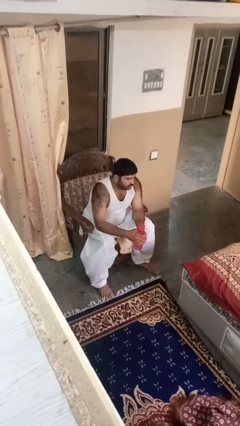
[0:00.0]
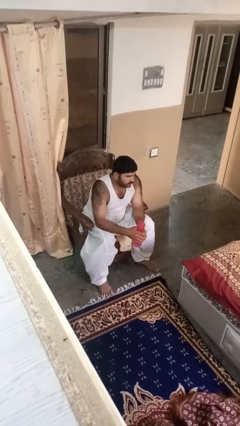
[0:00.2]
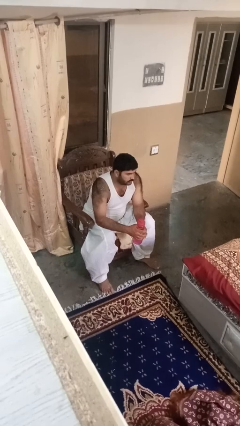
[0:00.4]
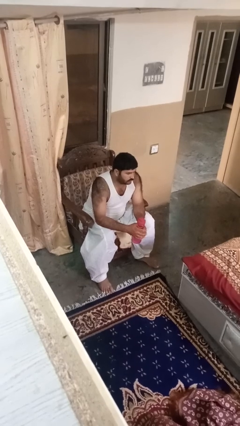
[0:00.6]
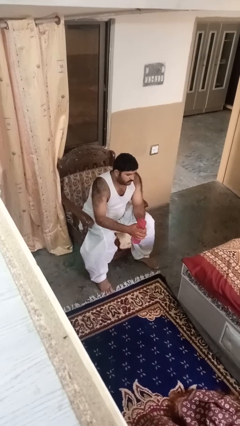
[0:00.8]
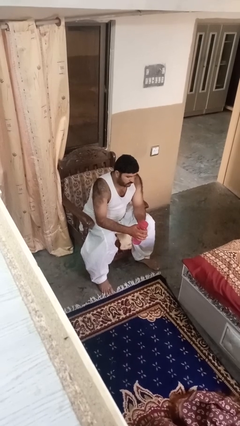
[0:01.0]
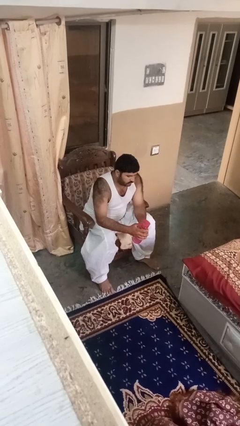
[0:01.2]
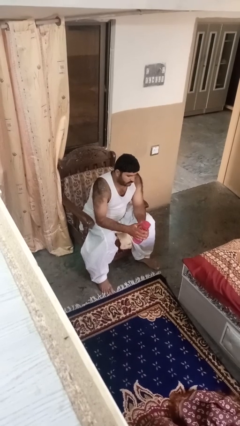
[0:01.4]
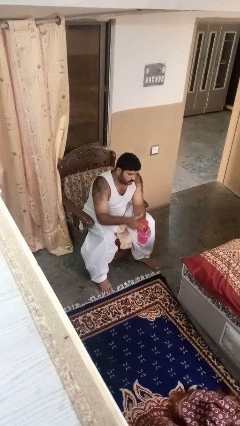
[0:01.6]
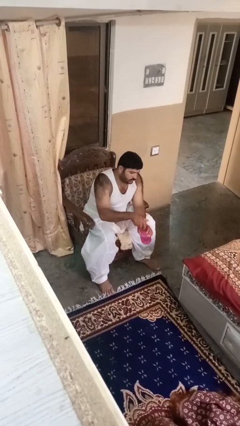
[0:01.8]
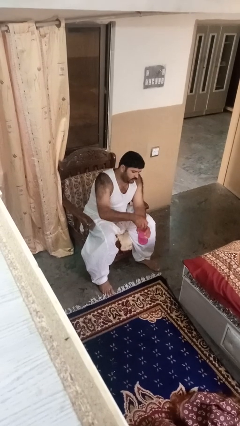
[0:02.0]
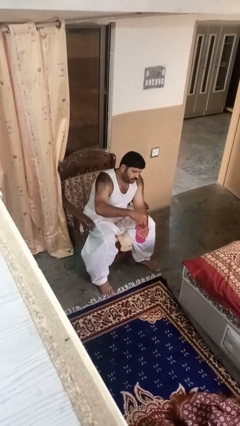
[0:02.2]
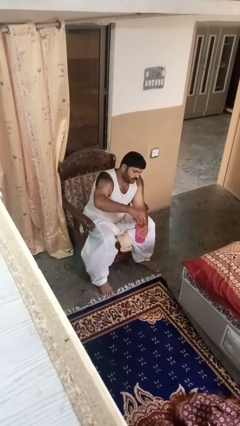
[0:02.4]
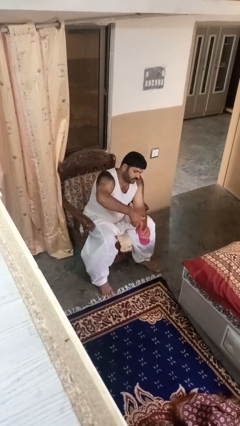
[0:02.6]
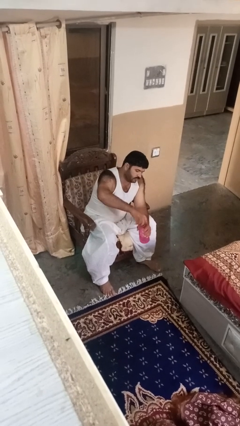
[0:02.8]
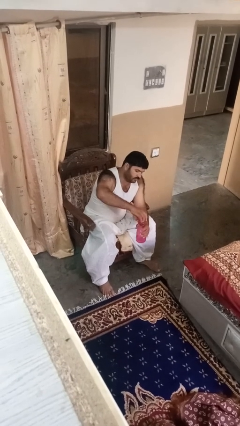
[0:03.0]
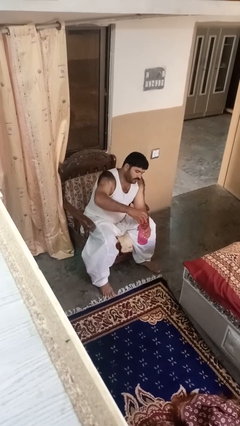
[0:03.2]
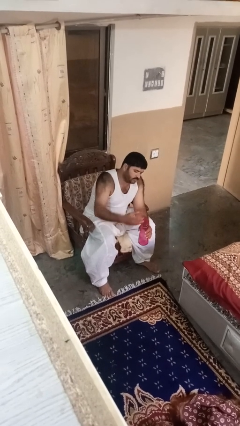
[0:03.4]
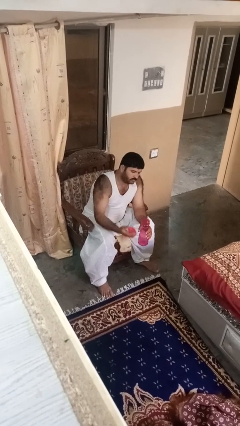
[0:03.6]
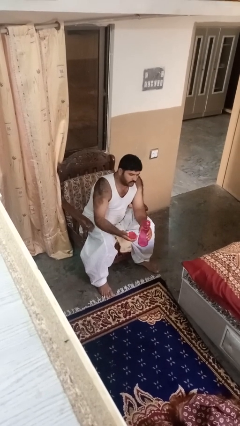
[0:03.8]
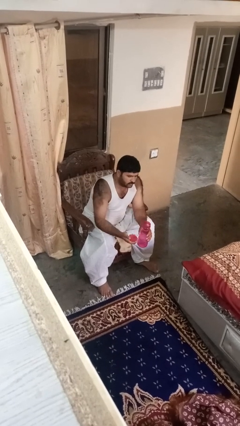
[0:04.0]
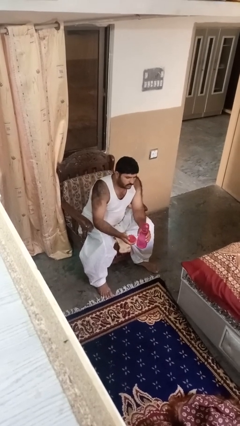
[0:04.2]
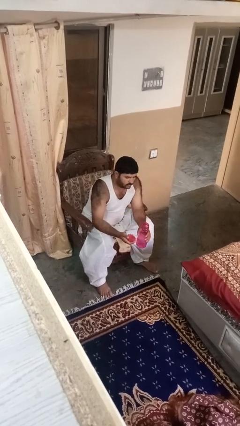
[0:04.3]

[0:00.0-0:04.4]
person unscrews lid from bottle

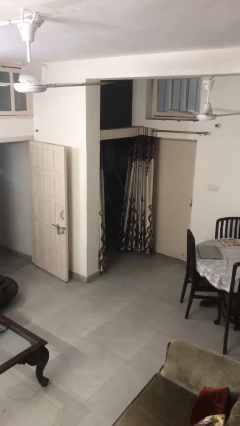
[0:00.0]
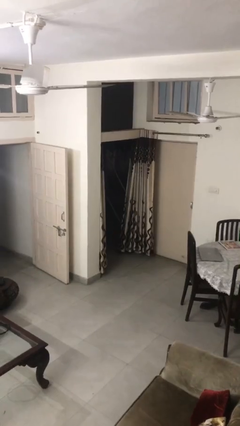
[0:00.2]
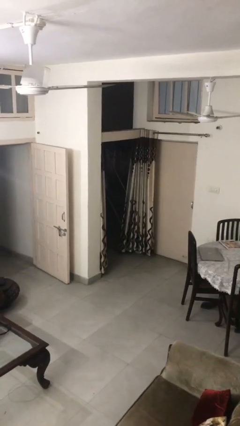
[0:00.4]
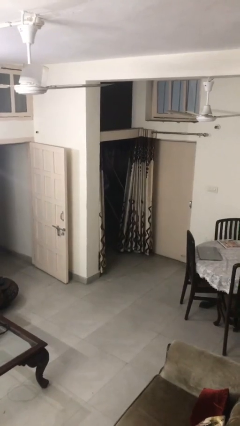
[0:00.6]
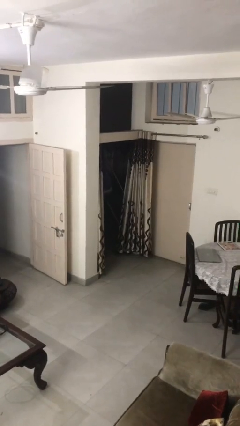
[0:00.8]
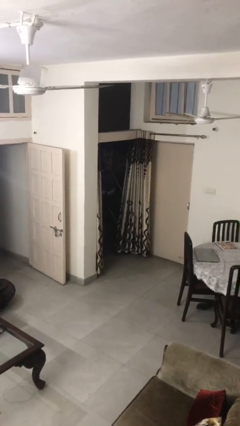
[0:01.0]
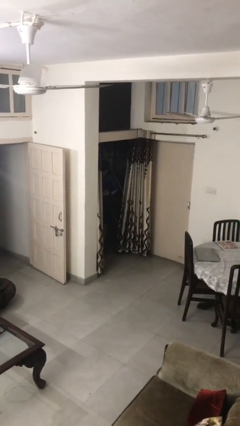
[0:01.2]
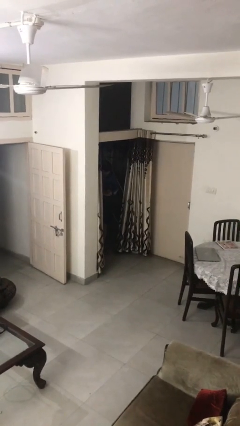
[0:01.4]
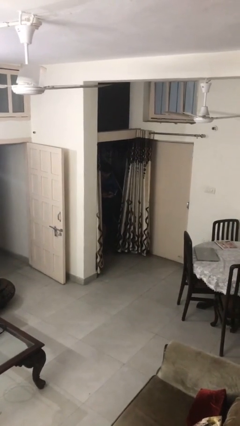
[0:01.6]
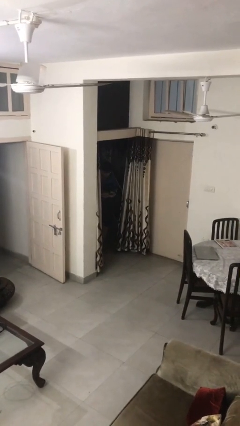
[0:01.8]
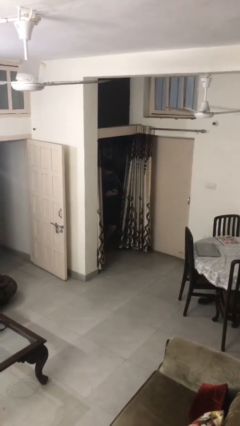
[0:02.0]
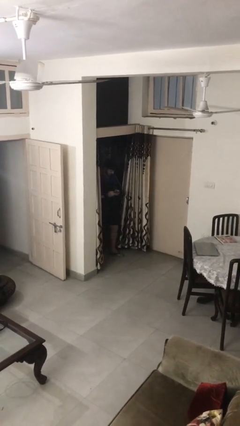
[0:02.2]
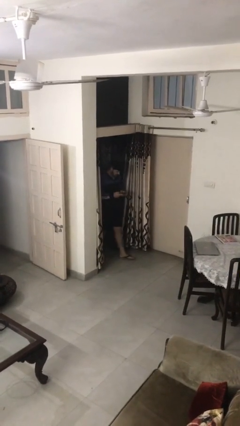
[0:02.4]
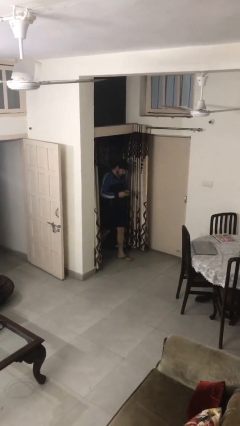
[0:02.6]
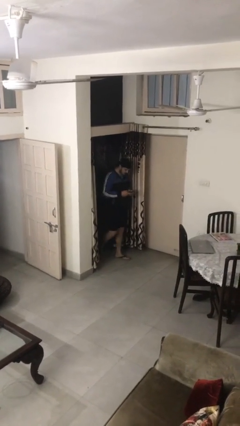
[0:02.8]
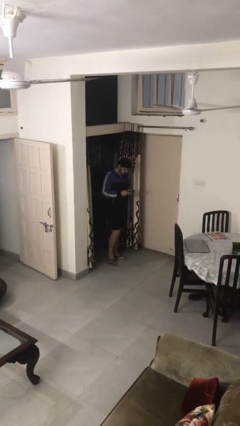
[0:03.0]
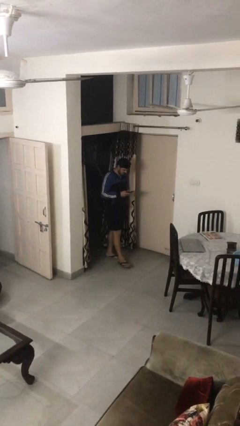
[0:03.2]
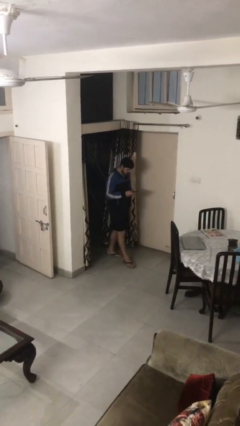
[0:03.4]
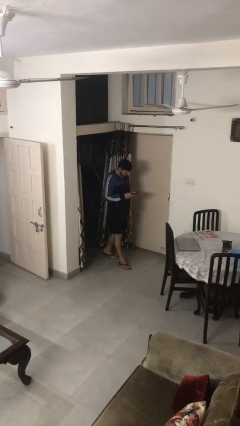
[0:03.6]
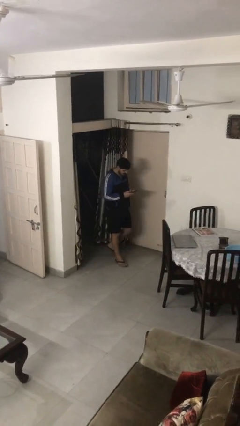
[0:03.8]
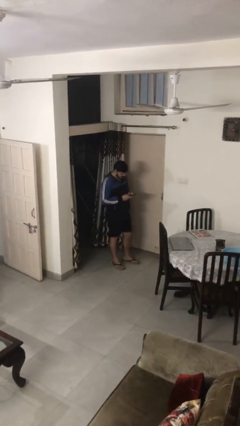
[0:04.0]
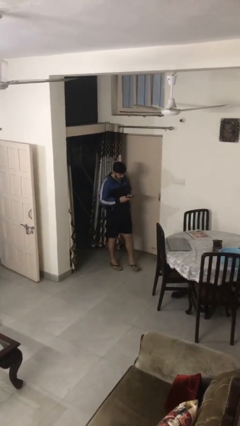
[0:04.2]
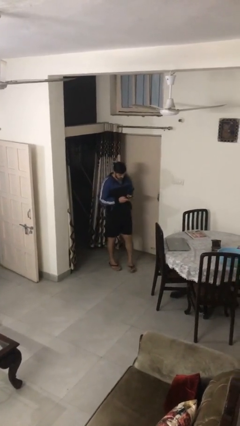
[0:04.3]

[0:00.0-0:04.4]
person enters scene through structure

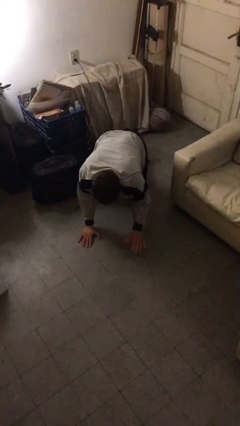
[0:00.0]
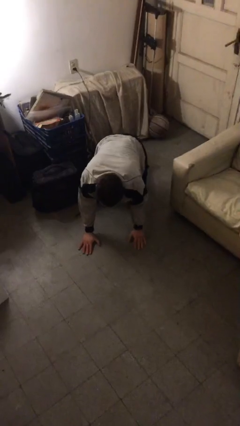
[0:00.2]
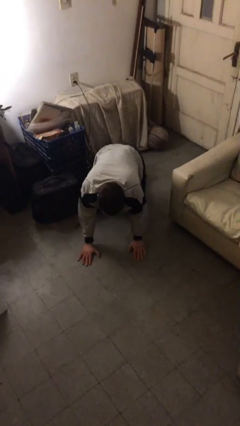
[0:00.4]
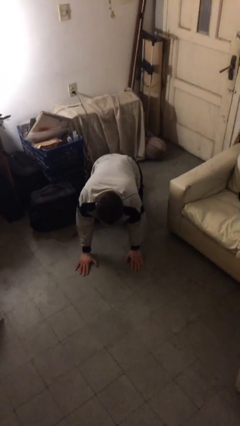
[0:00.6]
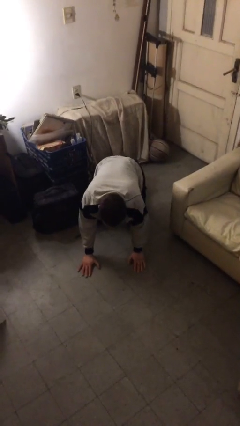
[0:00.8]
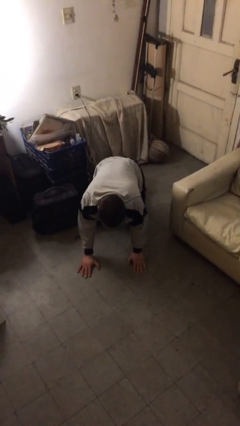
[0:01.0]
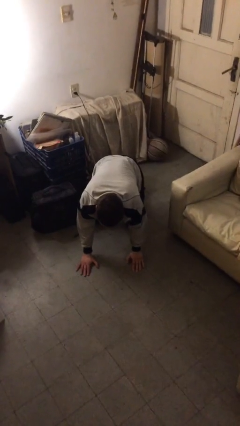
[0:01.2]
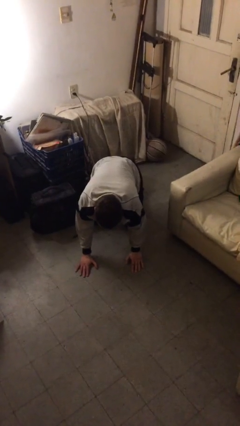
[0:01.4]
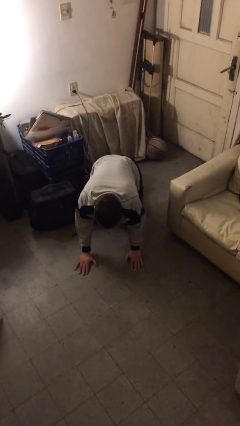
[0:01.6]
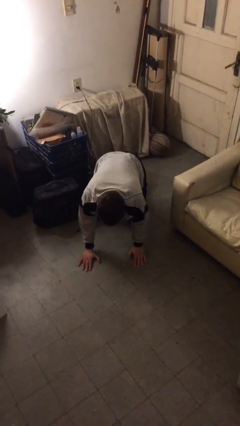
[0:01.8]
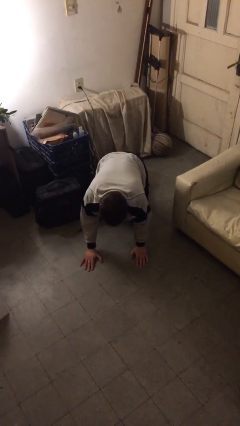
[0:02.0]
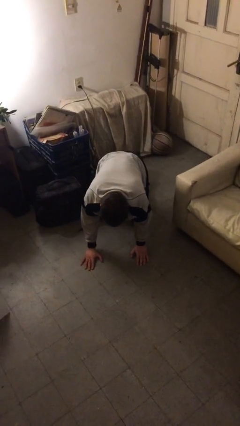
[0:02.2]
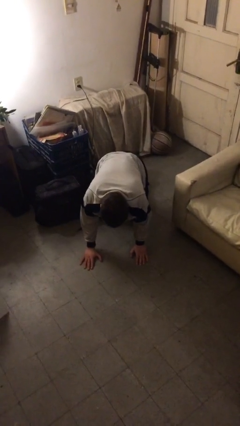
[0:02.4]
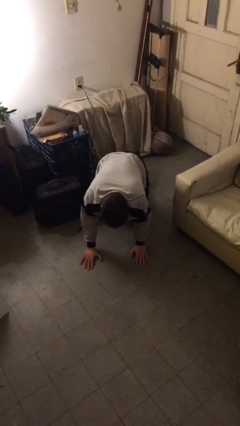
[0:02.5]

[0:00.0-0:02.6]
person crawls

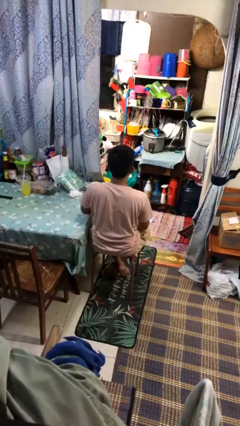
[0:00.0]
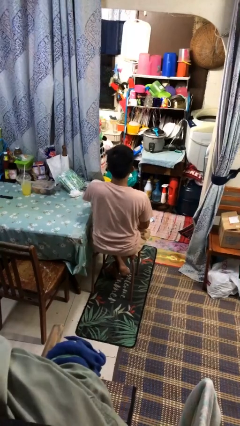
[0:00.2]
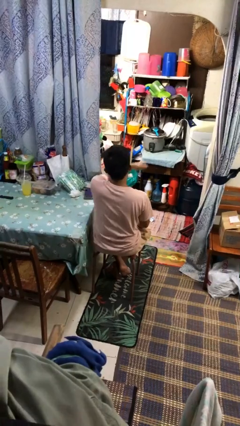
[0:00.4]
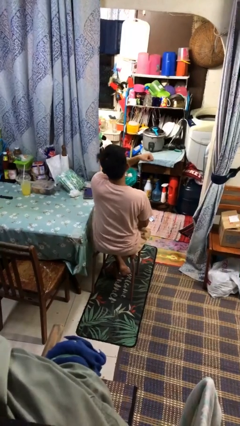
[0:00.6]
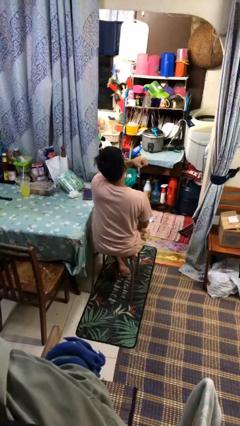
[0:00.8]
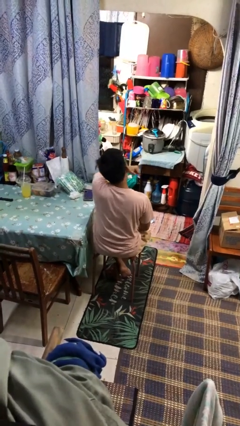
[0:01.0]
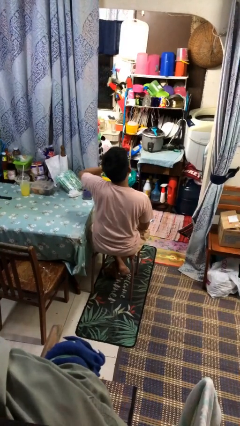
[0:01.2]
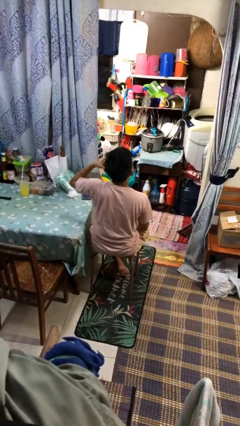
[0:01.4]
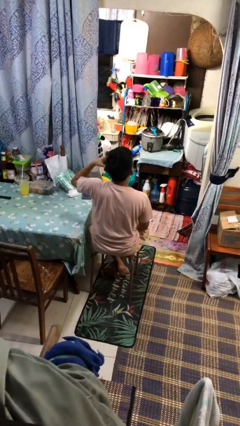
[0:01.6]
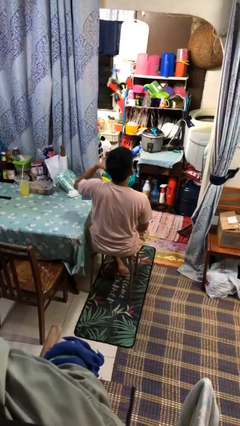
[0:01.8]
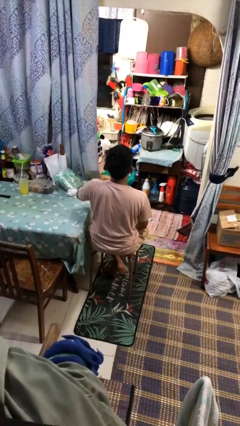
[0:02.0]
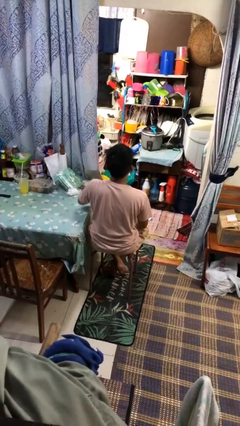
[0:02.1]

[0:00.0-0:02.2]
person gestures cut

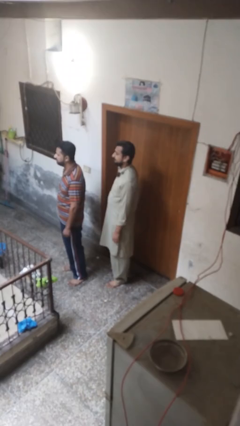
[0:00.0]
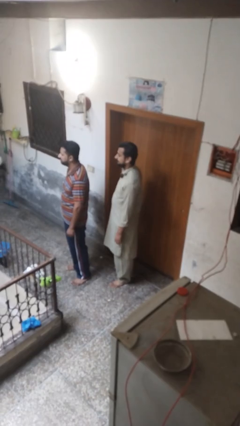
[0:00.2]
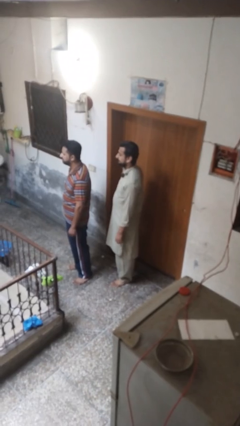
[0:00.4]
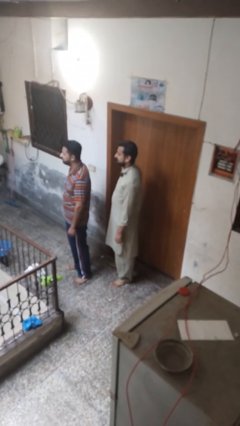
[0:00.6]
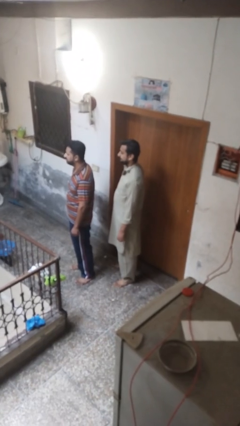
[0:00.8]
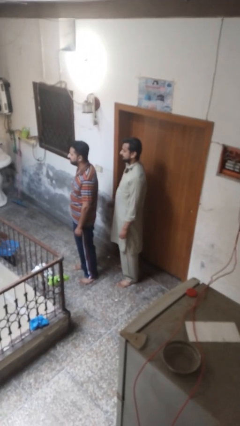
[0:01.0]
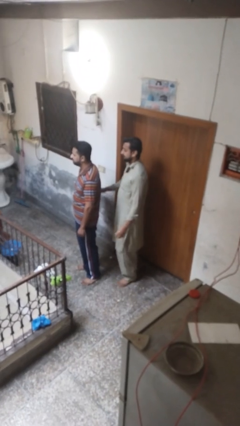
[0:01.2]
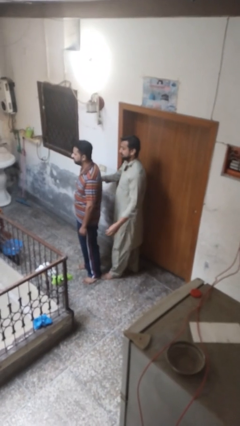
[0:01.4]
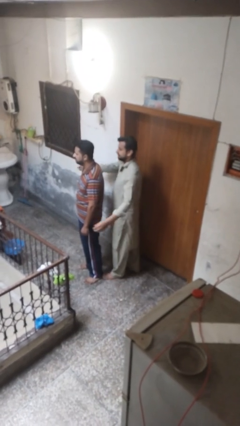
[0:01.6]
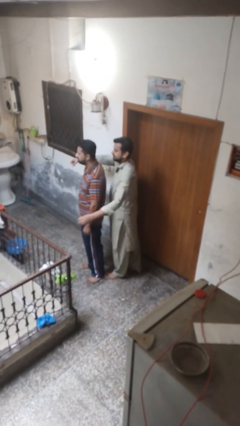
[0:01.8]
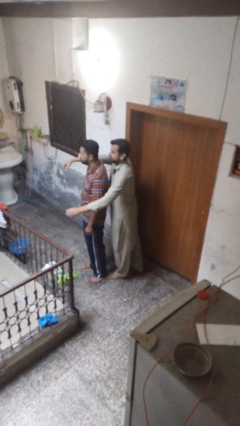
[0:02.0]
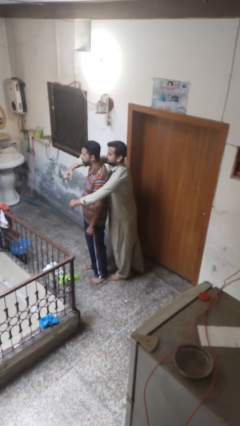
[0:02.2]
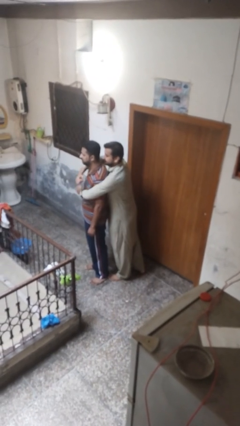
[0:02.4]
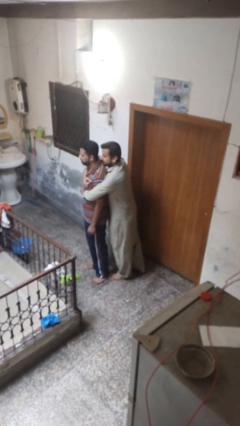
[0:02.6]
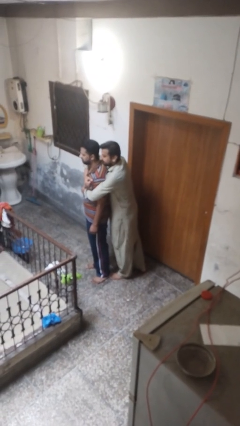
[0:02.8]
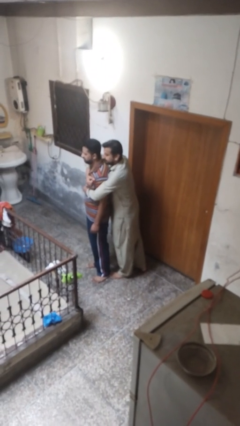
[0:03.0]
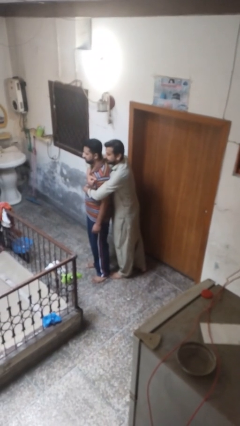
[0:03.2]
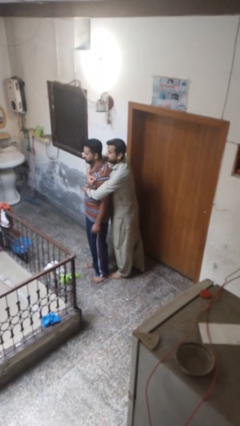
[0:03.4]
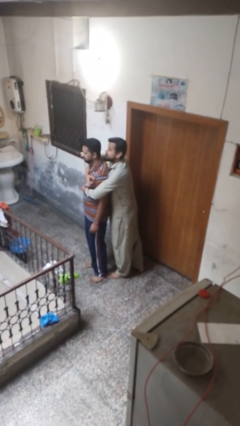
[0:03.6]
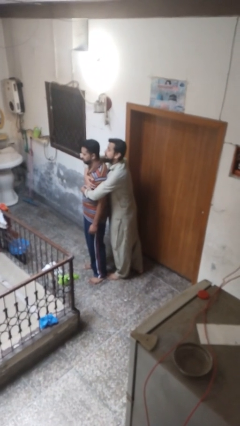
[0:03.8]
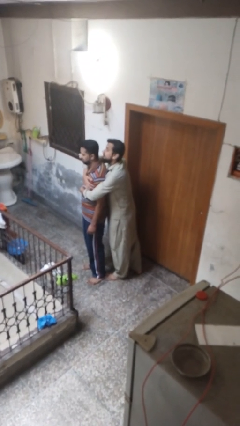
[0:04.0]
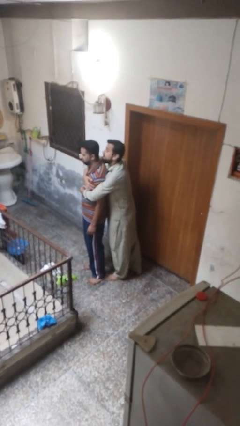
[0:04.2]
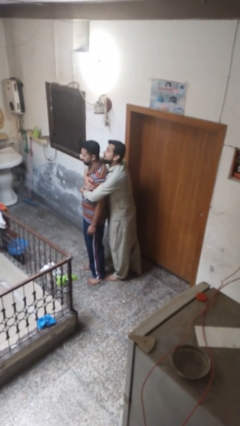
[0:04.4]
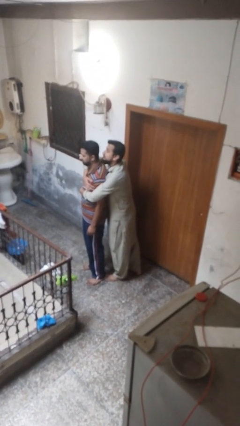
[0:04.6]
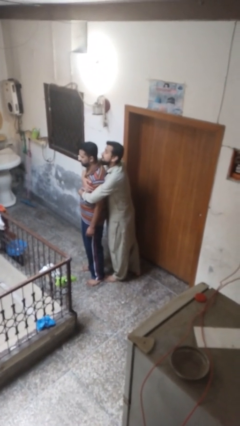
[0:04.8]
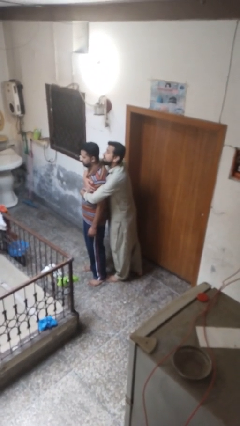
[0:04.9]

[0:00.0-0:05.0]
person hugs person from behind
